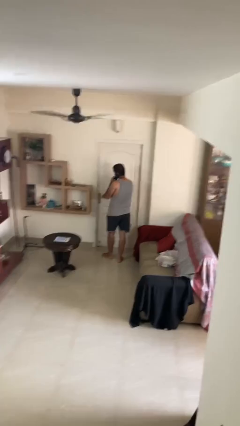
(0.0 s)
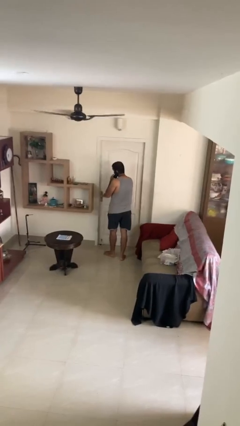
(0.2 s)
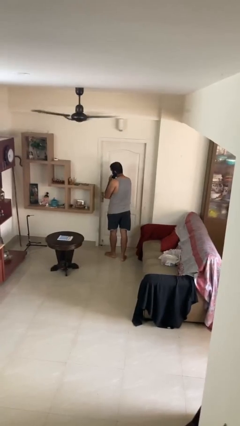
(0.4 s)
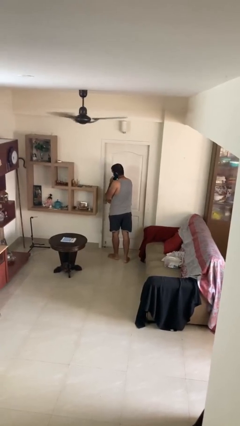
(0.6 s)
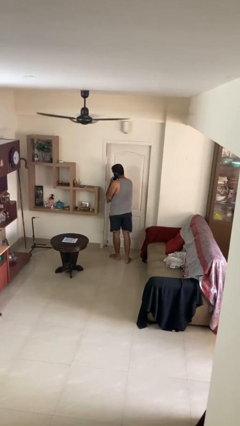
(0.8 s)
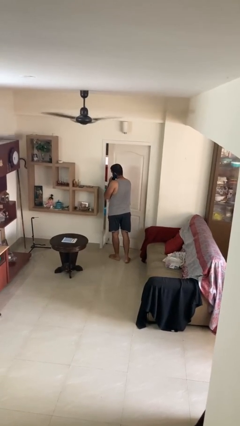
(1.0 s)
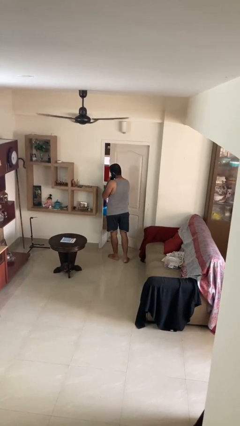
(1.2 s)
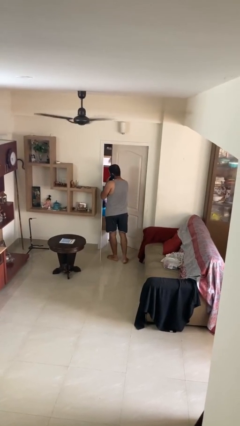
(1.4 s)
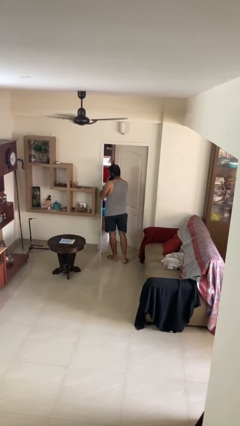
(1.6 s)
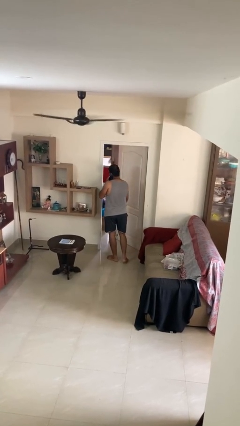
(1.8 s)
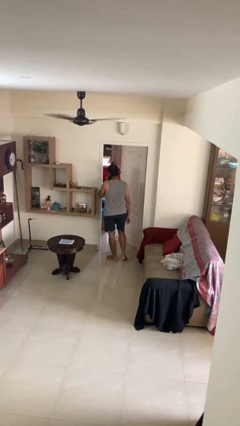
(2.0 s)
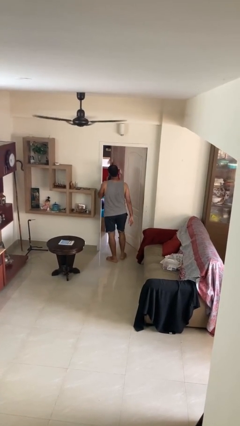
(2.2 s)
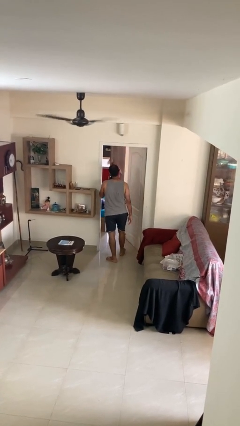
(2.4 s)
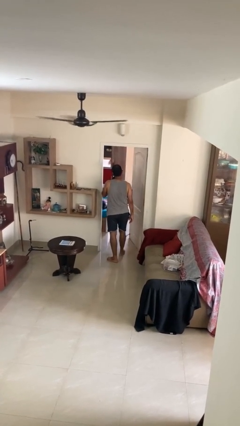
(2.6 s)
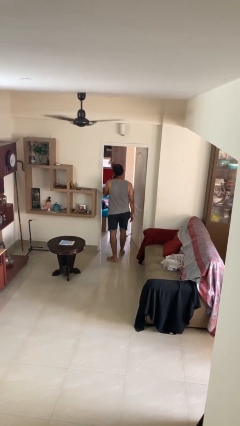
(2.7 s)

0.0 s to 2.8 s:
person opens facility door

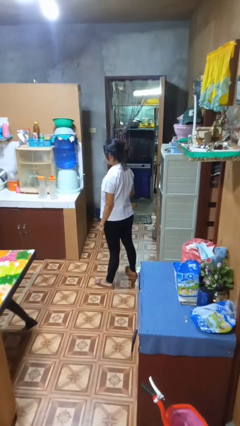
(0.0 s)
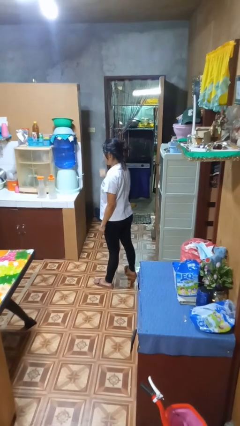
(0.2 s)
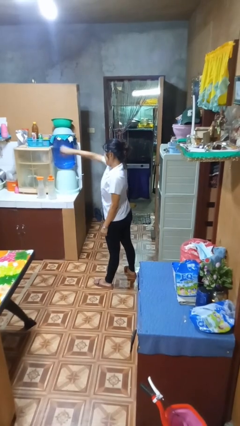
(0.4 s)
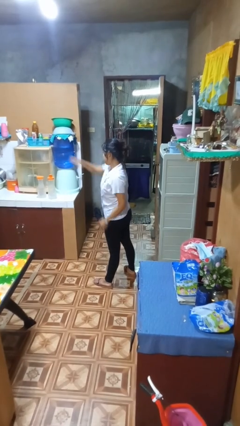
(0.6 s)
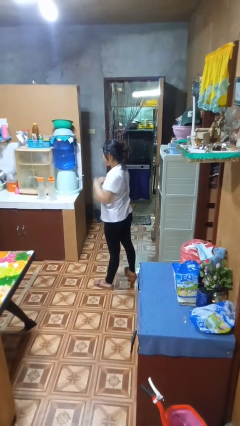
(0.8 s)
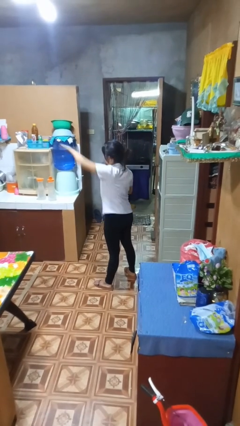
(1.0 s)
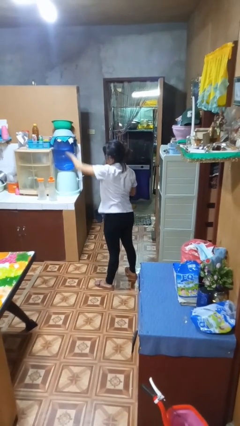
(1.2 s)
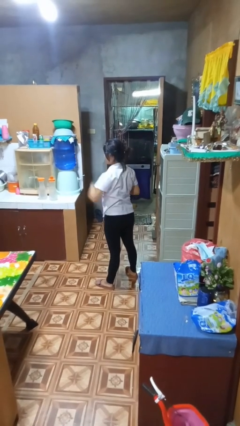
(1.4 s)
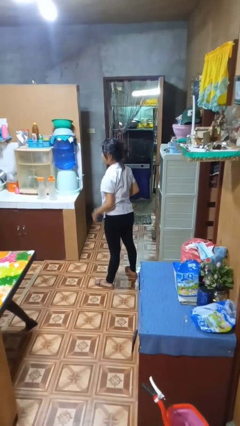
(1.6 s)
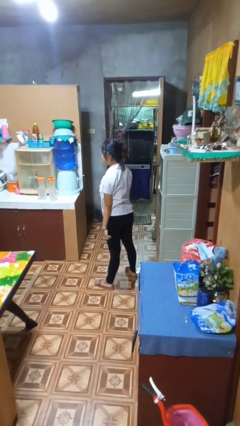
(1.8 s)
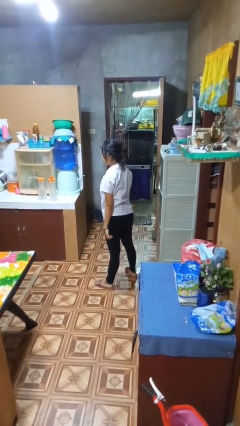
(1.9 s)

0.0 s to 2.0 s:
person punches

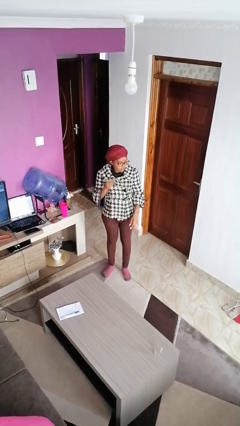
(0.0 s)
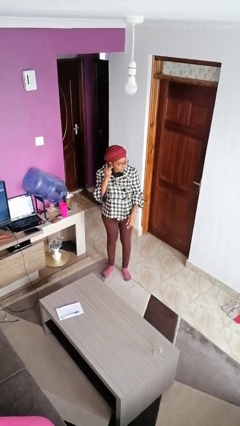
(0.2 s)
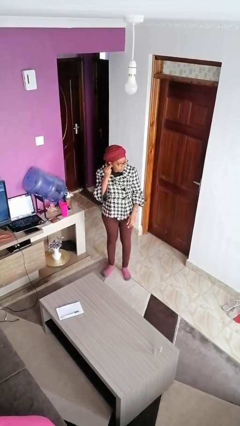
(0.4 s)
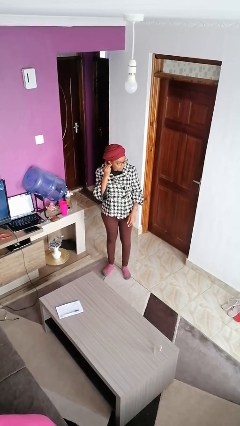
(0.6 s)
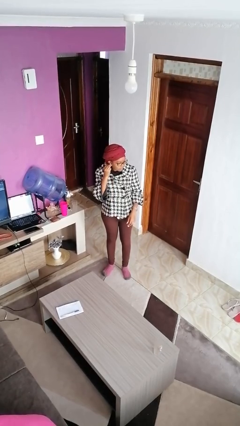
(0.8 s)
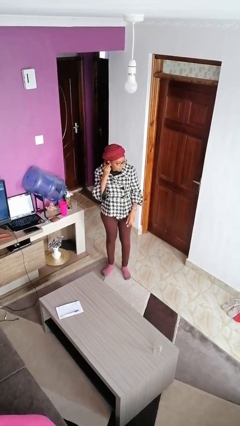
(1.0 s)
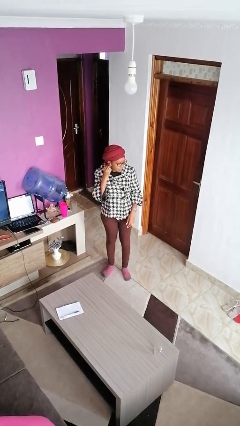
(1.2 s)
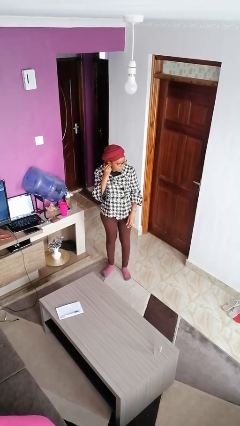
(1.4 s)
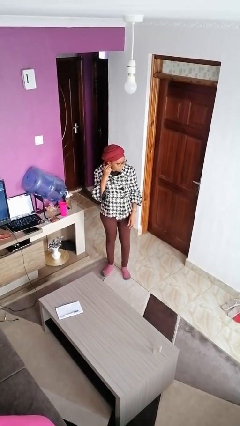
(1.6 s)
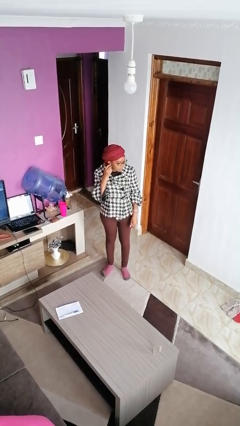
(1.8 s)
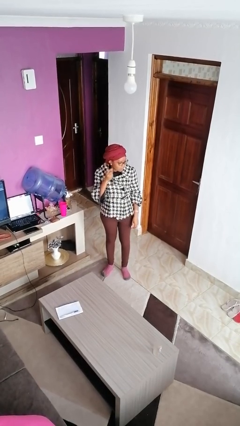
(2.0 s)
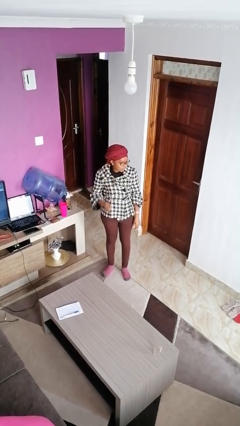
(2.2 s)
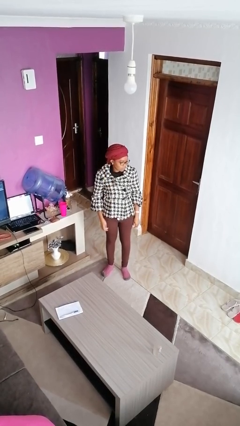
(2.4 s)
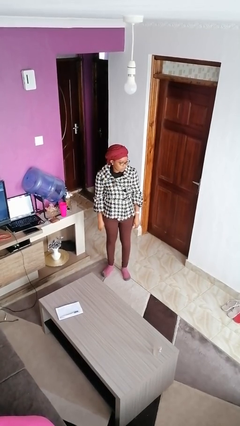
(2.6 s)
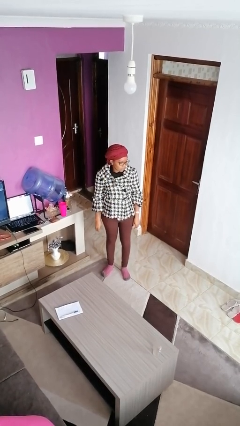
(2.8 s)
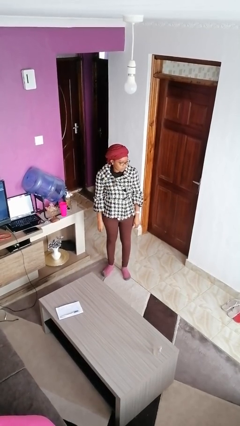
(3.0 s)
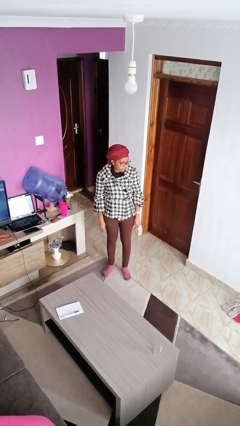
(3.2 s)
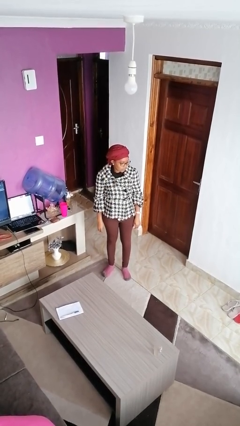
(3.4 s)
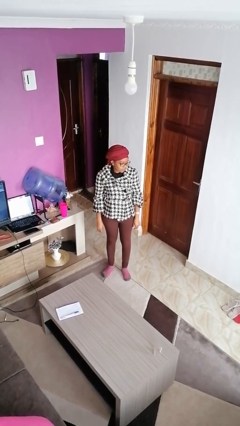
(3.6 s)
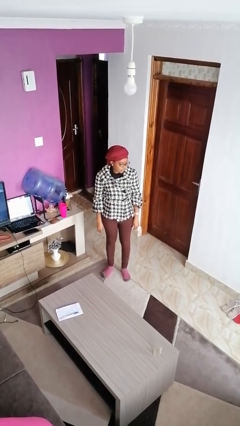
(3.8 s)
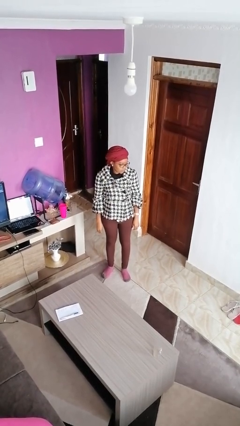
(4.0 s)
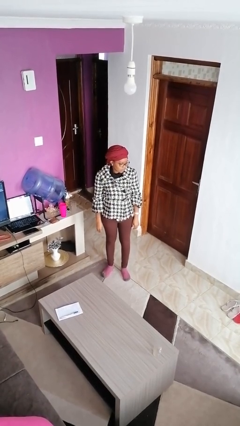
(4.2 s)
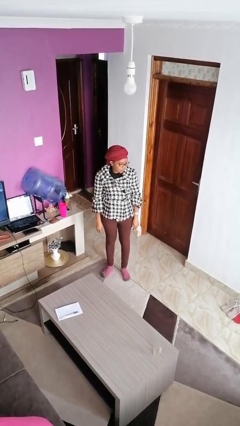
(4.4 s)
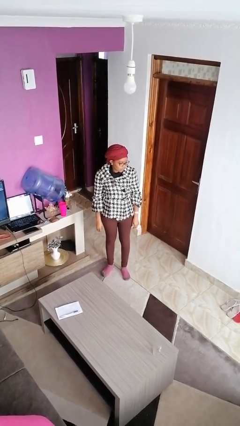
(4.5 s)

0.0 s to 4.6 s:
person puts on earrings

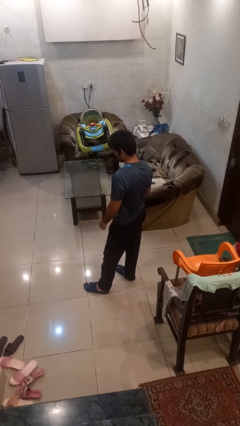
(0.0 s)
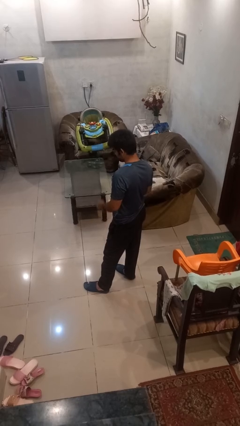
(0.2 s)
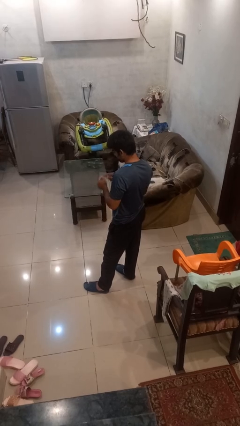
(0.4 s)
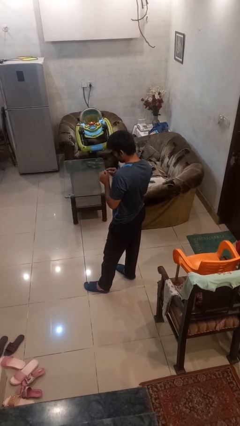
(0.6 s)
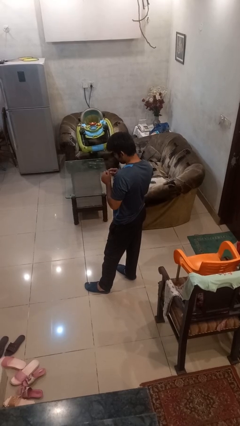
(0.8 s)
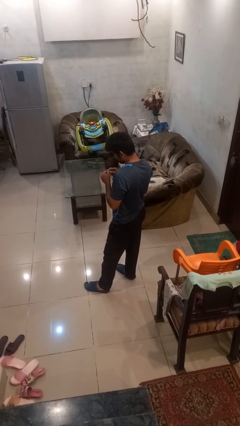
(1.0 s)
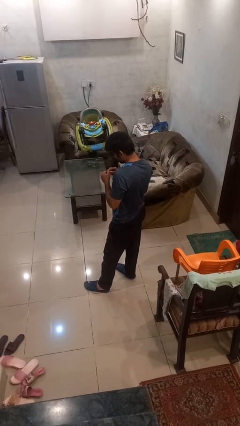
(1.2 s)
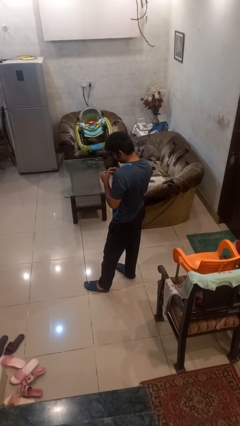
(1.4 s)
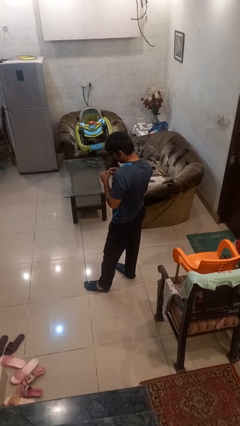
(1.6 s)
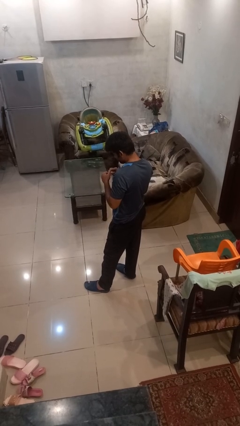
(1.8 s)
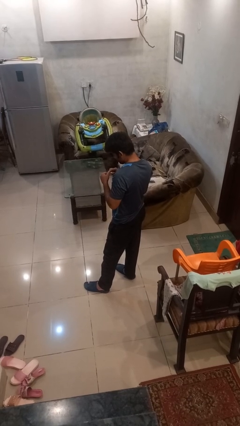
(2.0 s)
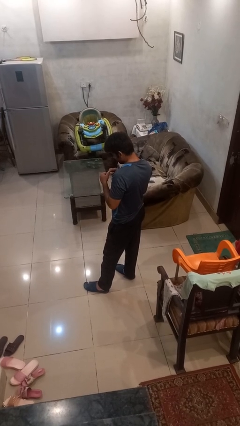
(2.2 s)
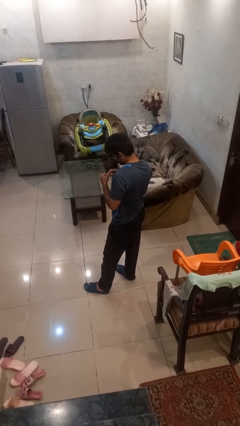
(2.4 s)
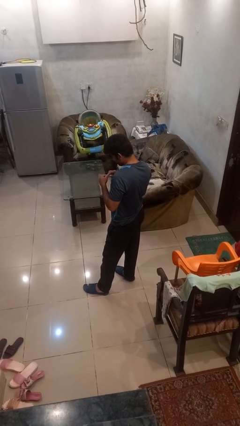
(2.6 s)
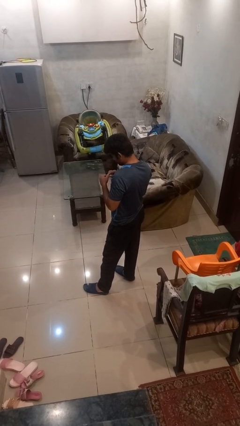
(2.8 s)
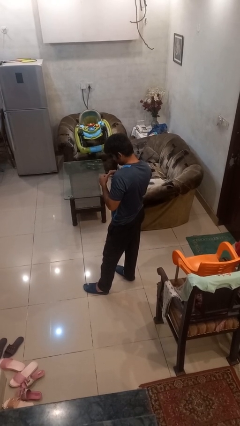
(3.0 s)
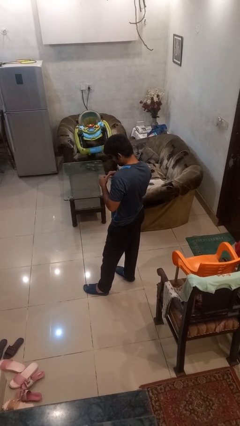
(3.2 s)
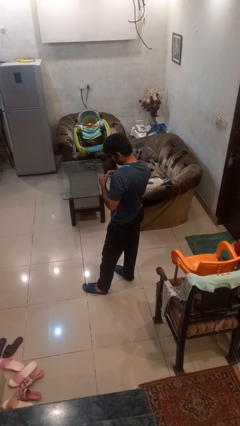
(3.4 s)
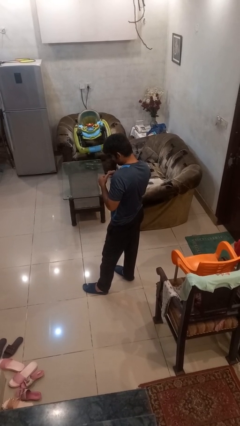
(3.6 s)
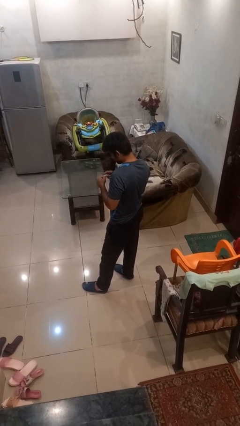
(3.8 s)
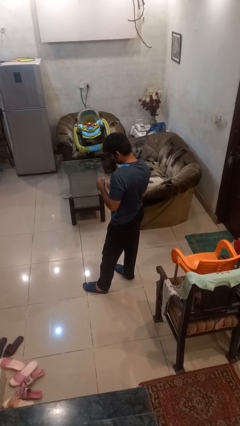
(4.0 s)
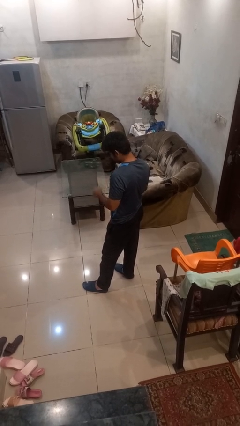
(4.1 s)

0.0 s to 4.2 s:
person files fingernails

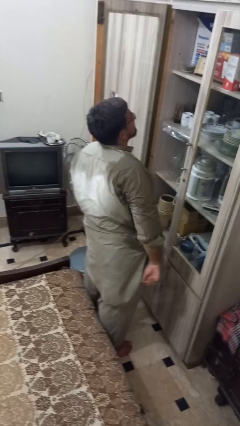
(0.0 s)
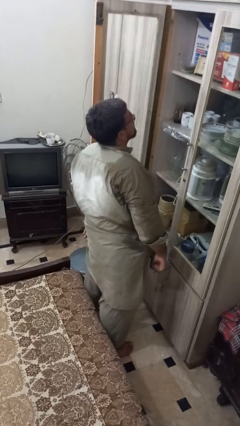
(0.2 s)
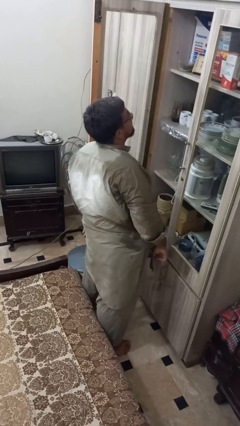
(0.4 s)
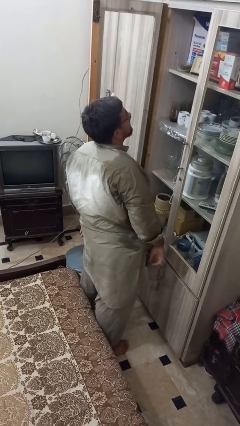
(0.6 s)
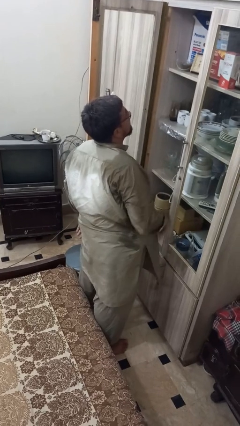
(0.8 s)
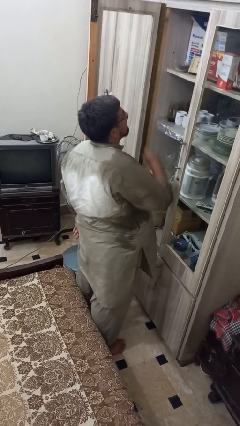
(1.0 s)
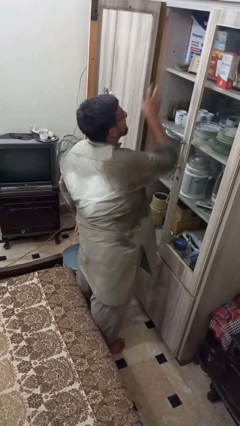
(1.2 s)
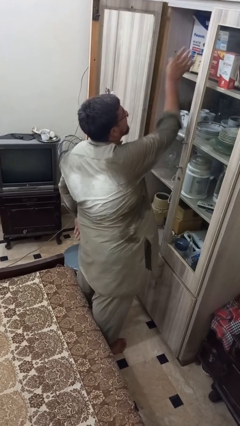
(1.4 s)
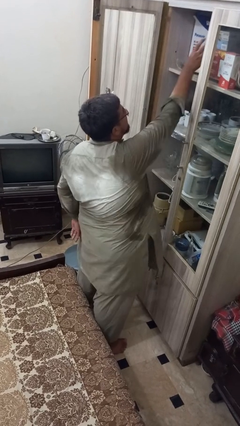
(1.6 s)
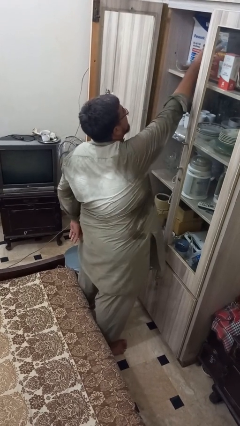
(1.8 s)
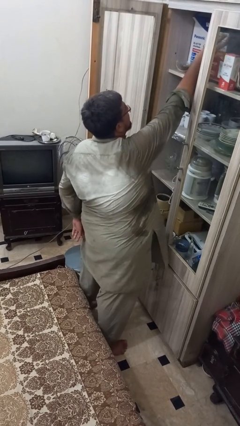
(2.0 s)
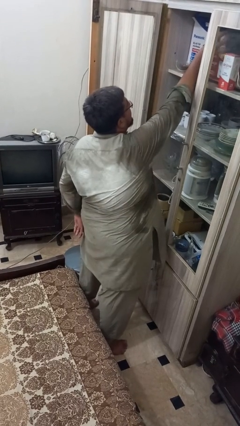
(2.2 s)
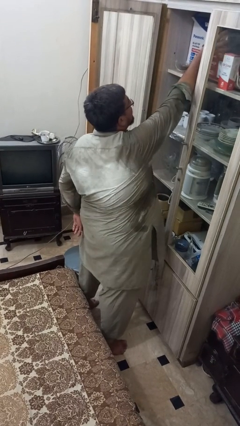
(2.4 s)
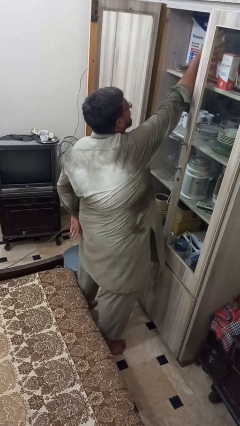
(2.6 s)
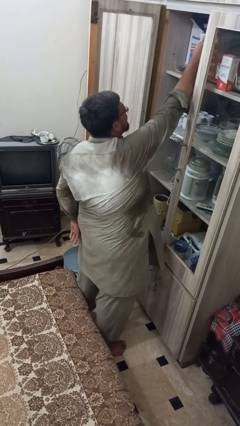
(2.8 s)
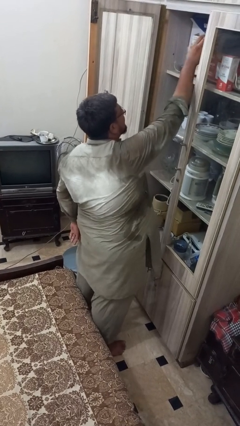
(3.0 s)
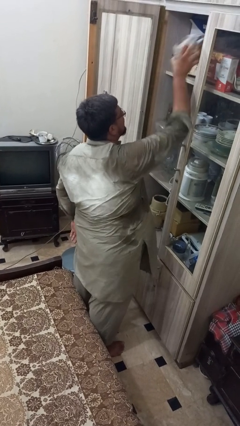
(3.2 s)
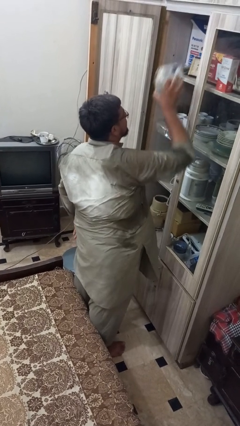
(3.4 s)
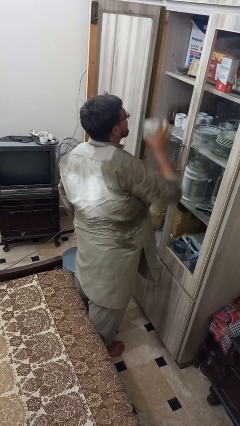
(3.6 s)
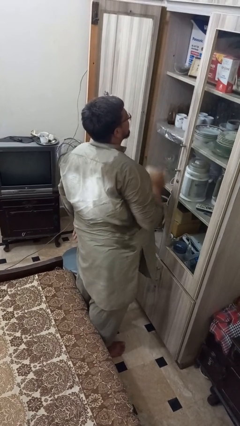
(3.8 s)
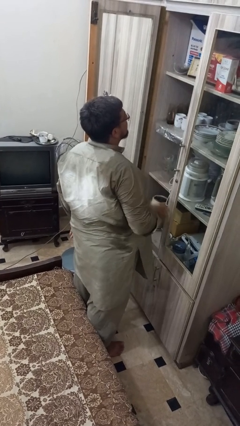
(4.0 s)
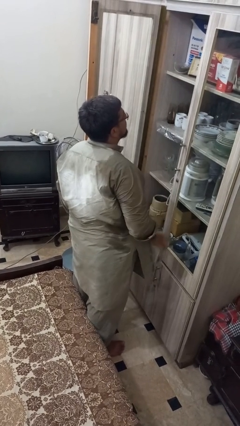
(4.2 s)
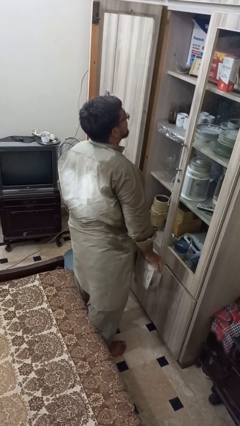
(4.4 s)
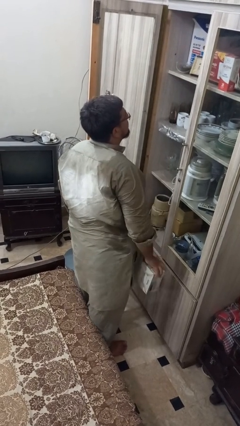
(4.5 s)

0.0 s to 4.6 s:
person picks up object from shelf
